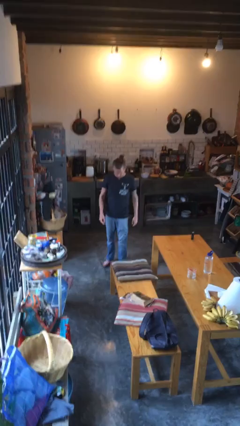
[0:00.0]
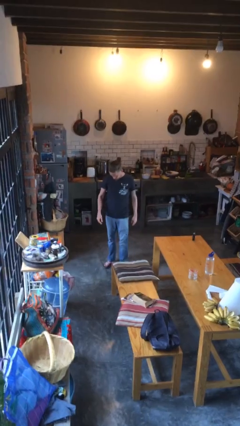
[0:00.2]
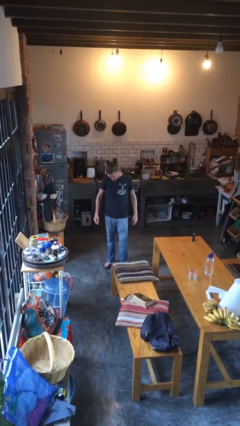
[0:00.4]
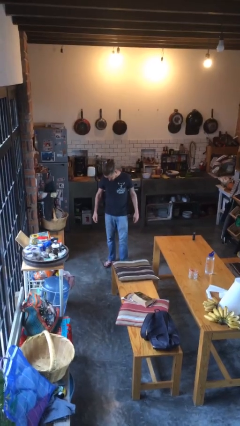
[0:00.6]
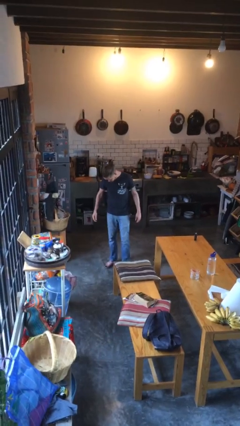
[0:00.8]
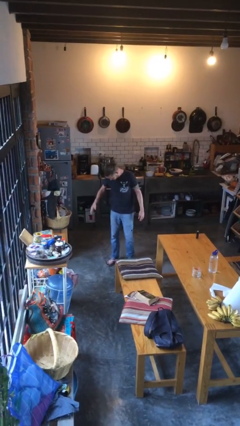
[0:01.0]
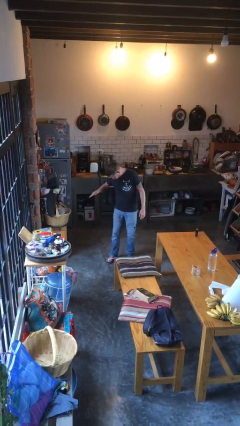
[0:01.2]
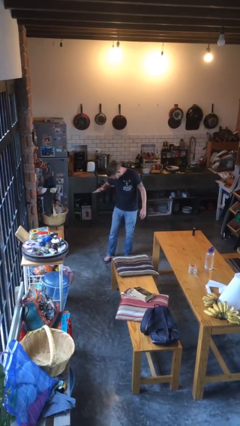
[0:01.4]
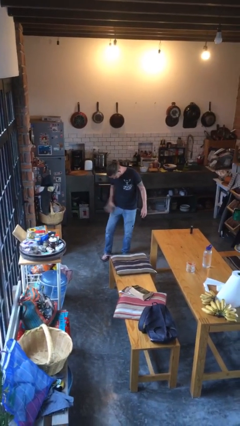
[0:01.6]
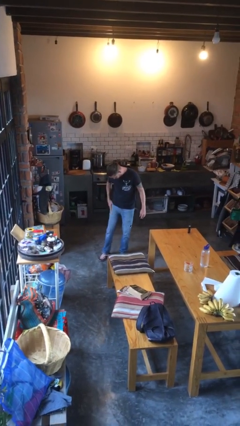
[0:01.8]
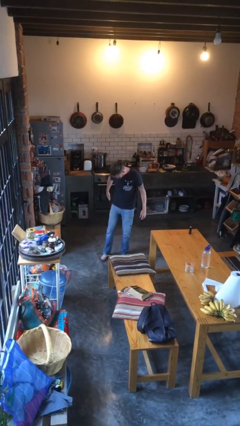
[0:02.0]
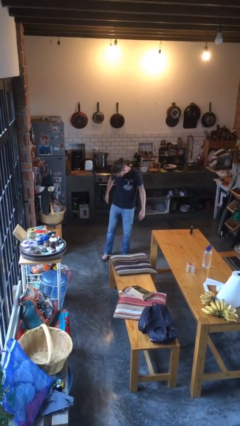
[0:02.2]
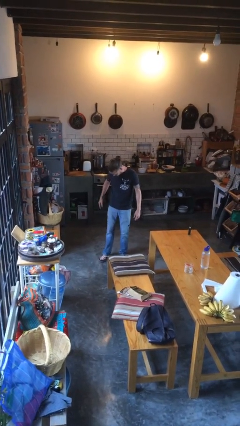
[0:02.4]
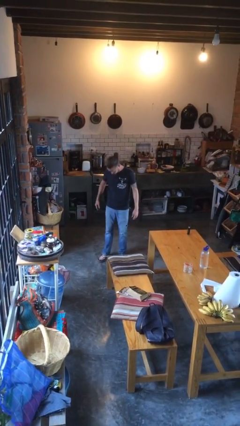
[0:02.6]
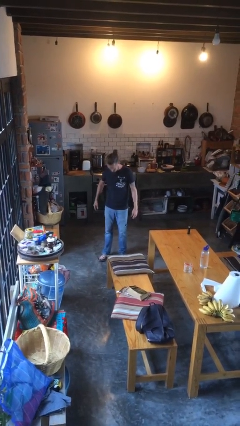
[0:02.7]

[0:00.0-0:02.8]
person swats bug

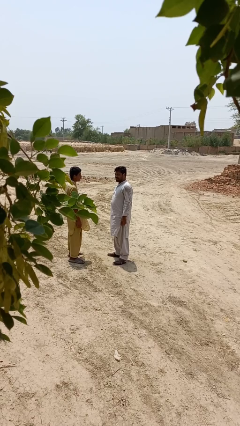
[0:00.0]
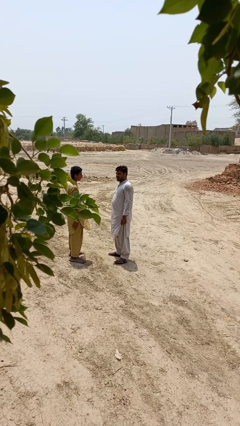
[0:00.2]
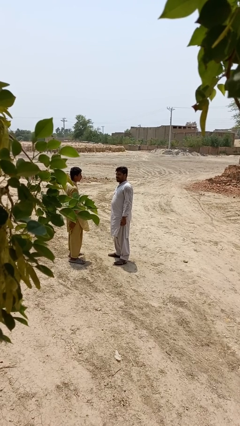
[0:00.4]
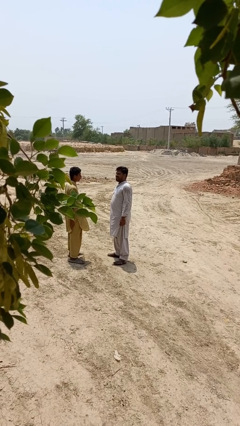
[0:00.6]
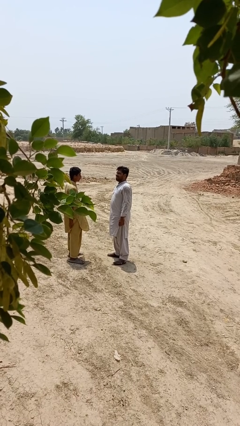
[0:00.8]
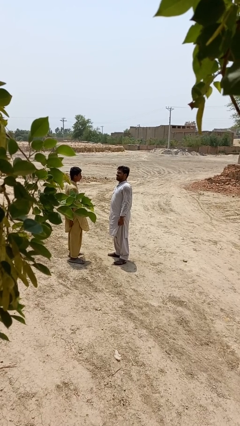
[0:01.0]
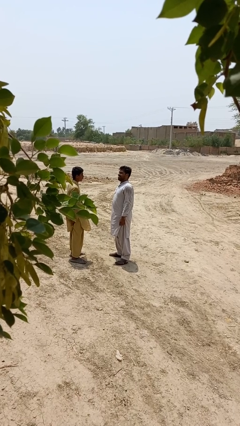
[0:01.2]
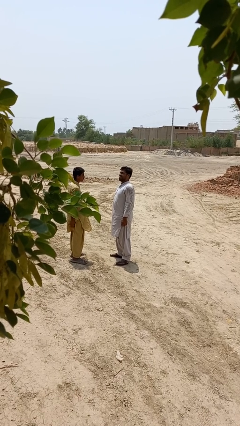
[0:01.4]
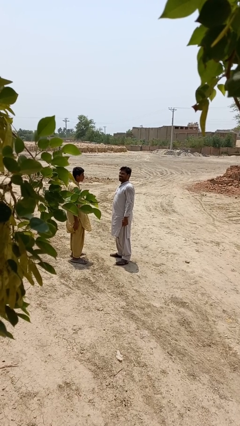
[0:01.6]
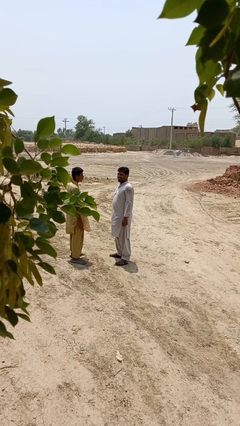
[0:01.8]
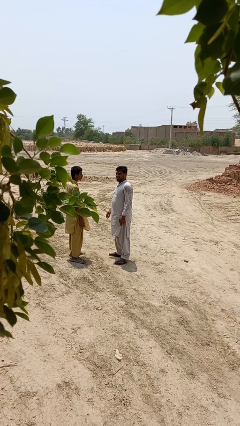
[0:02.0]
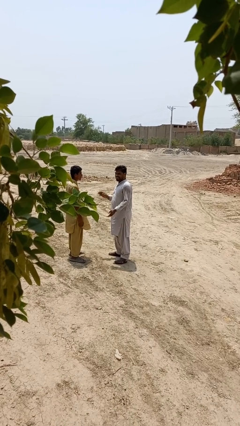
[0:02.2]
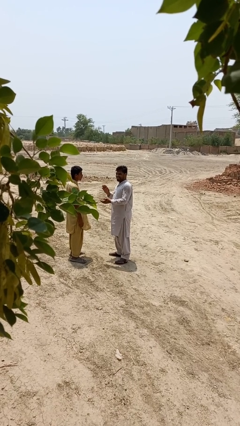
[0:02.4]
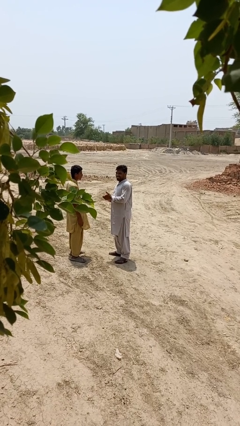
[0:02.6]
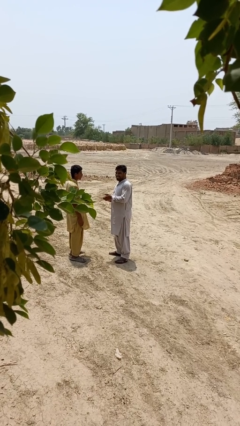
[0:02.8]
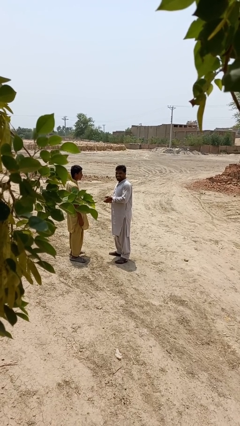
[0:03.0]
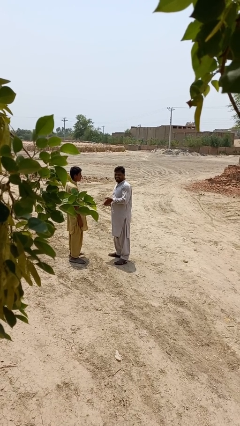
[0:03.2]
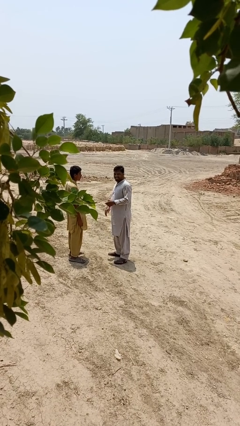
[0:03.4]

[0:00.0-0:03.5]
person laughs with person

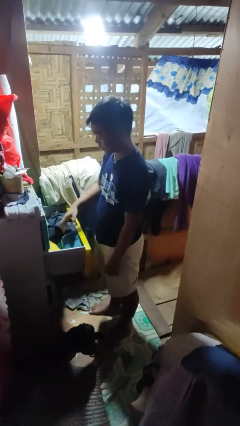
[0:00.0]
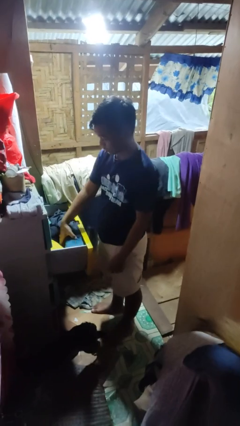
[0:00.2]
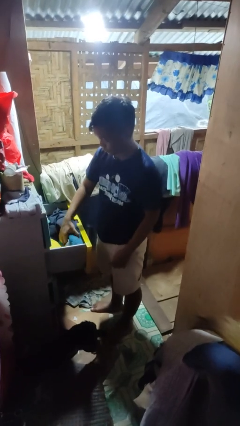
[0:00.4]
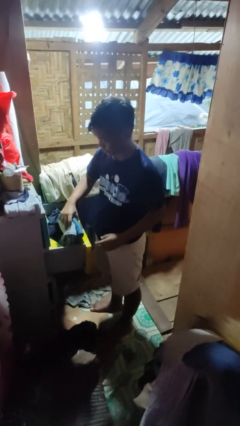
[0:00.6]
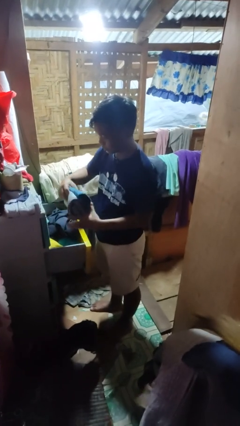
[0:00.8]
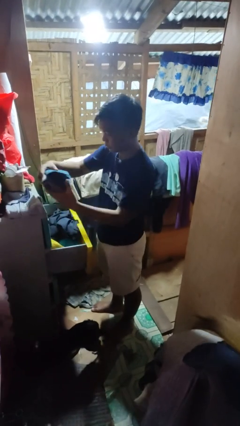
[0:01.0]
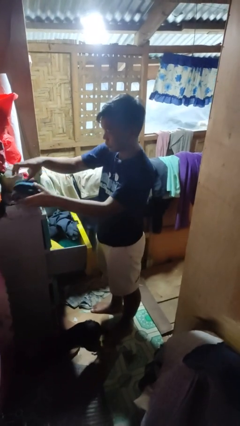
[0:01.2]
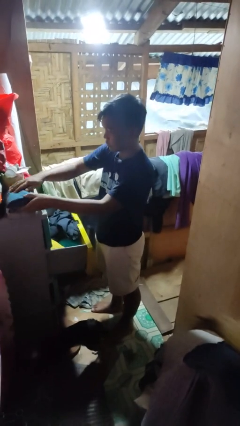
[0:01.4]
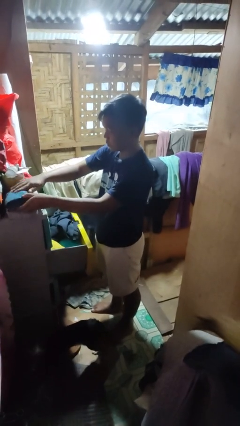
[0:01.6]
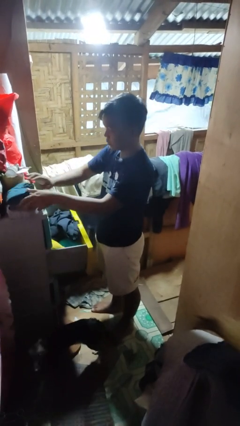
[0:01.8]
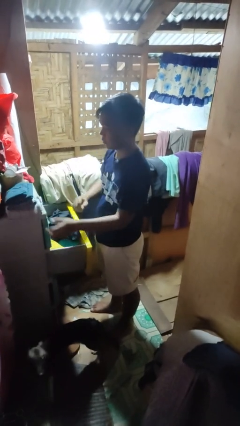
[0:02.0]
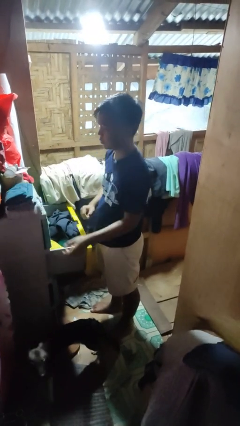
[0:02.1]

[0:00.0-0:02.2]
person takes clothes from dresser

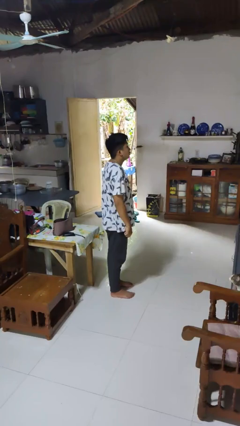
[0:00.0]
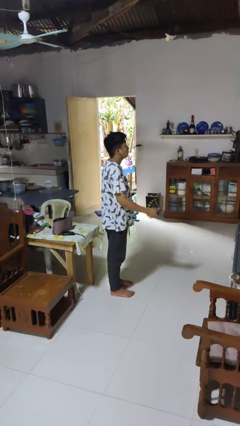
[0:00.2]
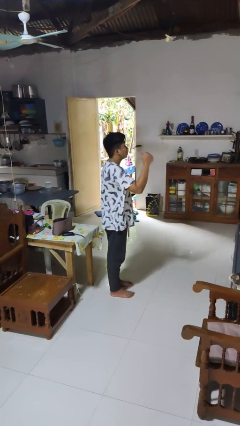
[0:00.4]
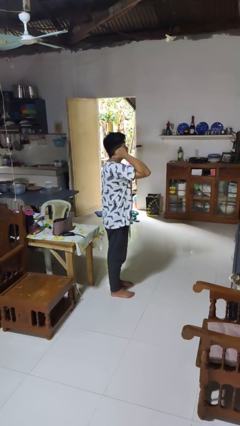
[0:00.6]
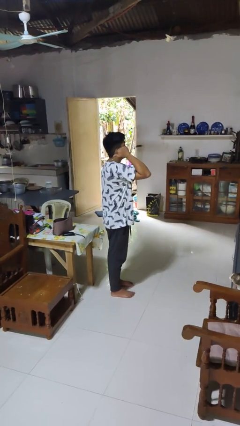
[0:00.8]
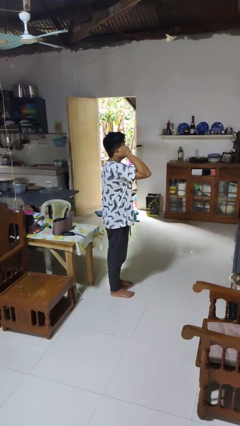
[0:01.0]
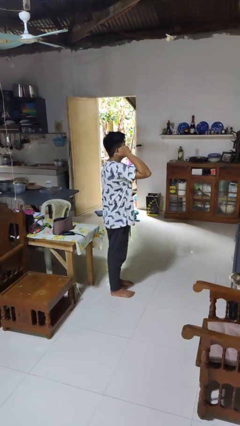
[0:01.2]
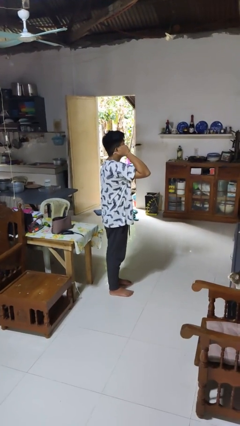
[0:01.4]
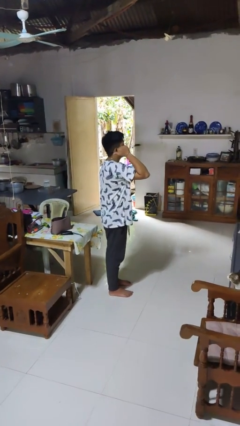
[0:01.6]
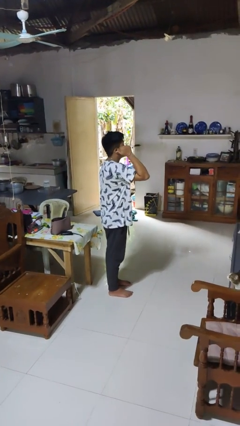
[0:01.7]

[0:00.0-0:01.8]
person gestures behind me

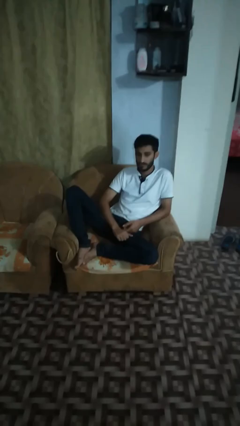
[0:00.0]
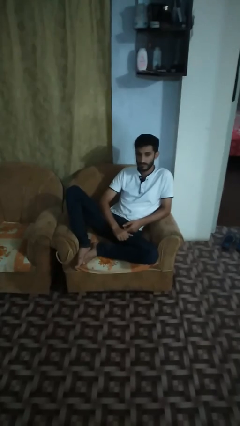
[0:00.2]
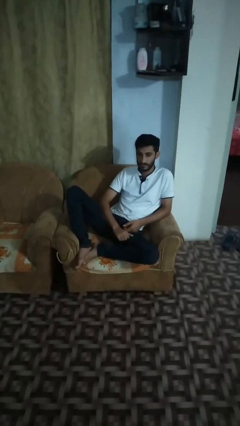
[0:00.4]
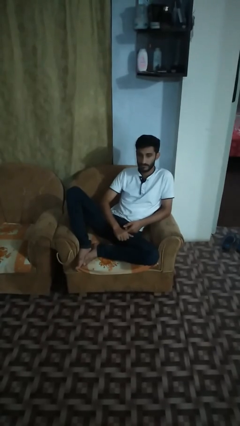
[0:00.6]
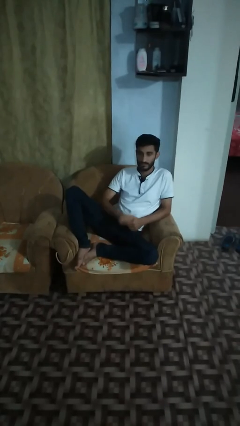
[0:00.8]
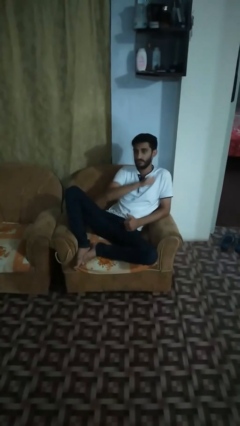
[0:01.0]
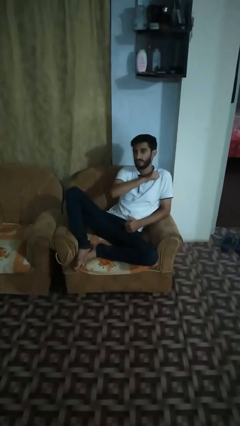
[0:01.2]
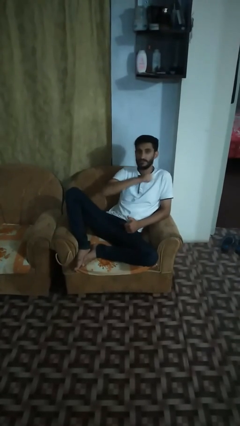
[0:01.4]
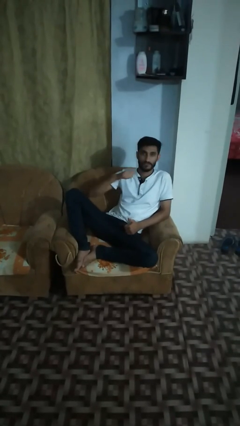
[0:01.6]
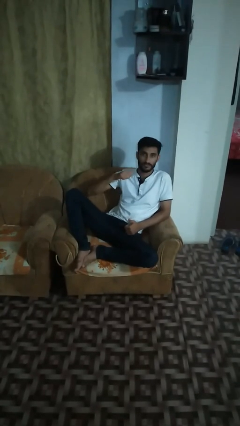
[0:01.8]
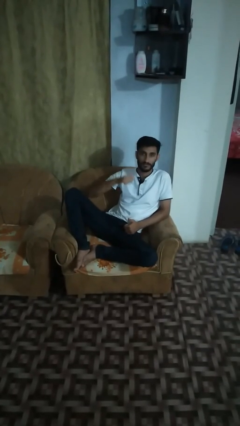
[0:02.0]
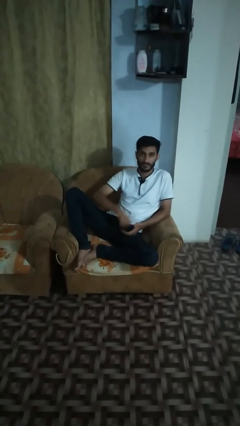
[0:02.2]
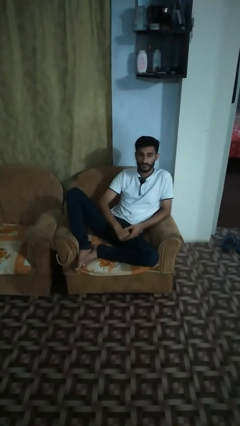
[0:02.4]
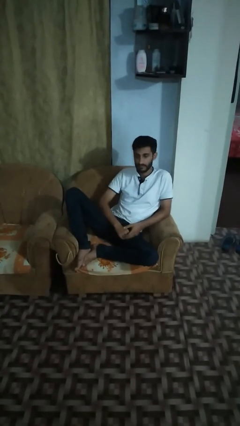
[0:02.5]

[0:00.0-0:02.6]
person gestures cut

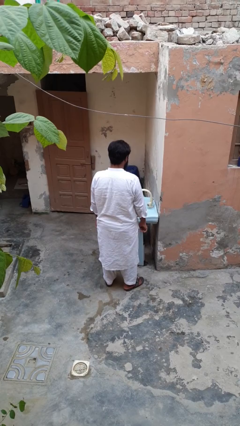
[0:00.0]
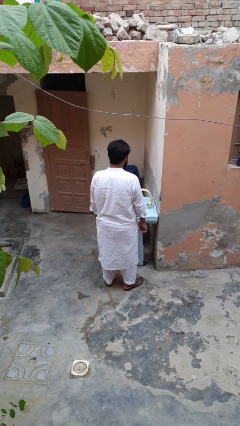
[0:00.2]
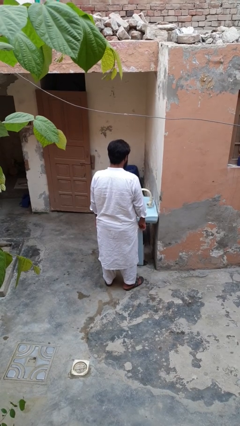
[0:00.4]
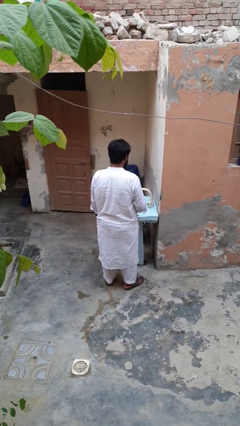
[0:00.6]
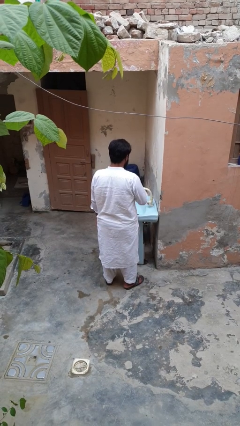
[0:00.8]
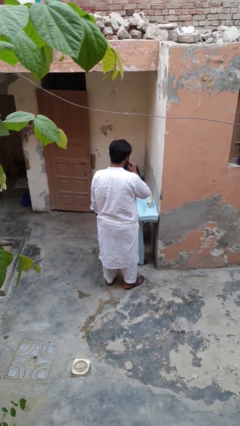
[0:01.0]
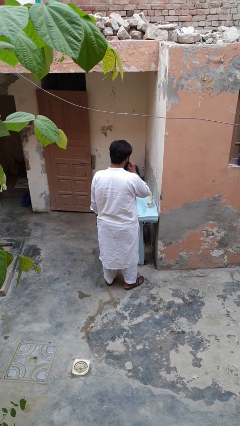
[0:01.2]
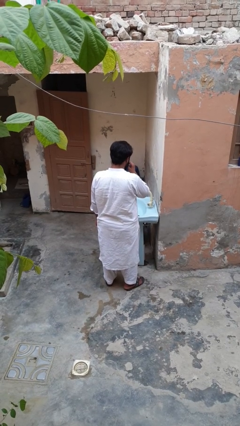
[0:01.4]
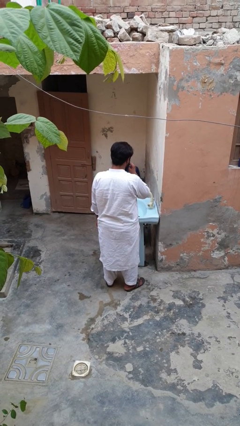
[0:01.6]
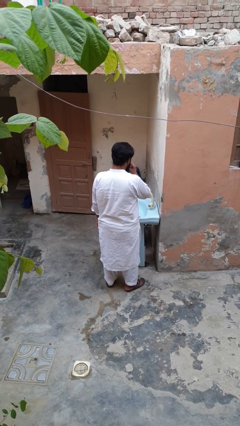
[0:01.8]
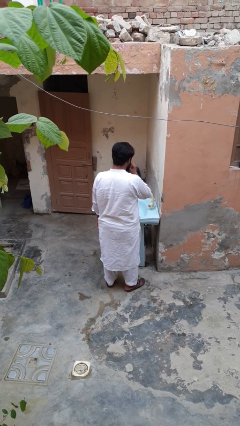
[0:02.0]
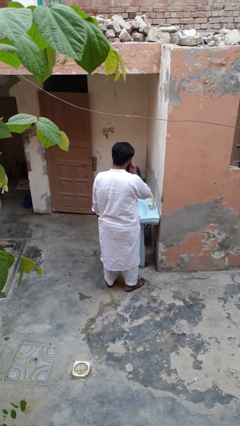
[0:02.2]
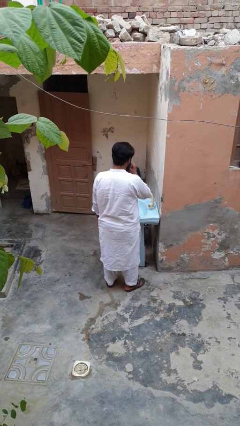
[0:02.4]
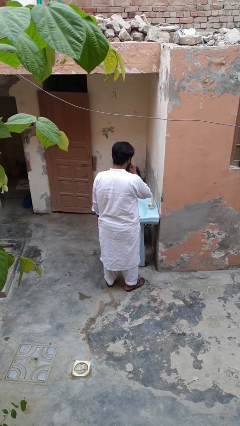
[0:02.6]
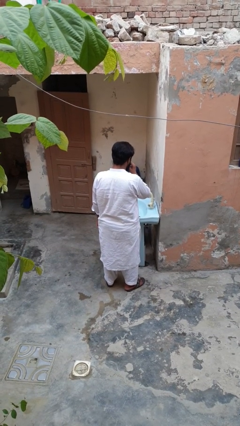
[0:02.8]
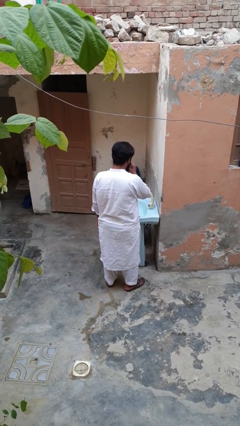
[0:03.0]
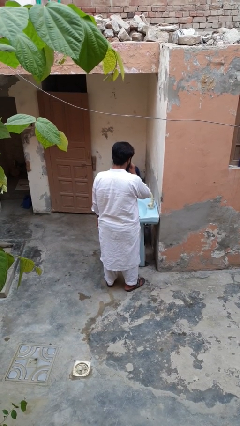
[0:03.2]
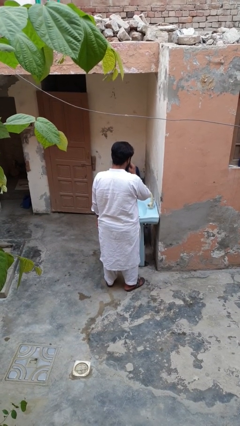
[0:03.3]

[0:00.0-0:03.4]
person flosses

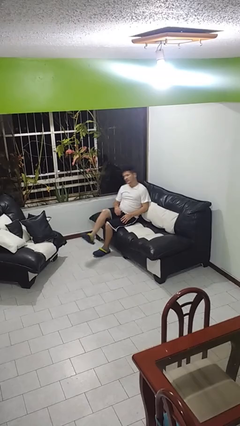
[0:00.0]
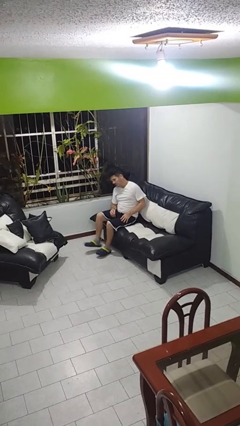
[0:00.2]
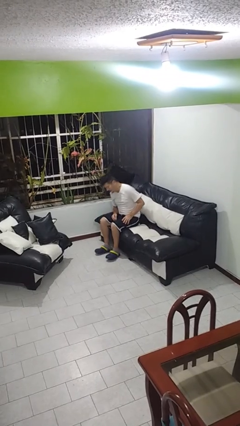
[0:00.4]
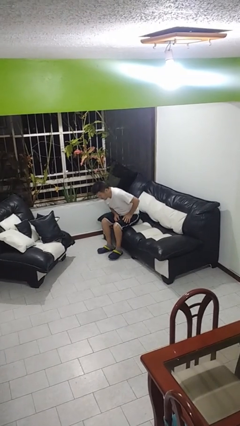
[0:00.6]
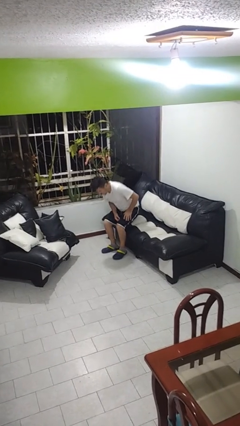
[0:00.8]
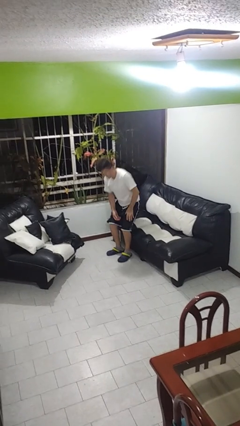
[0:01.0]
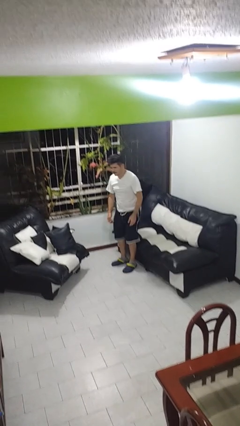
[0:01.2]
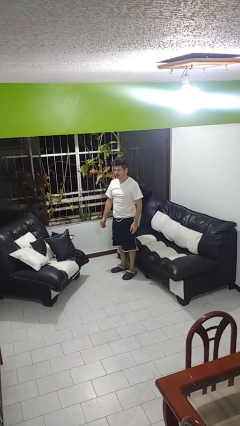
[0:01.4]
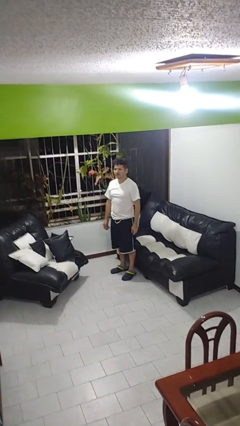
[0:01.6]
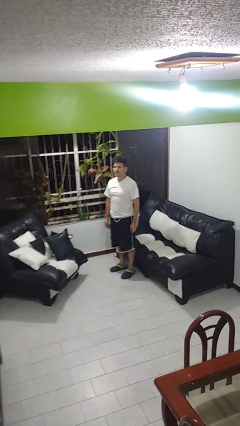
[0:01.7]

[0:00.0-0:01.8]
person stands up
